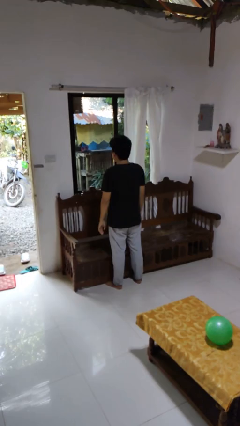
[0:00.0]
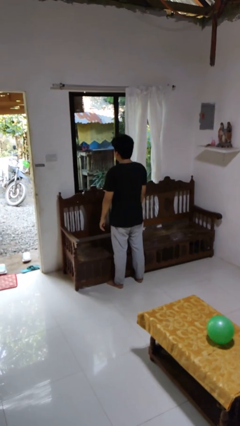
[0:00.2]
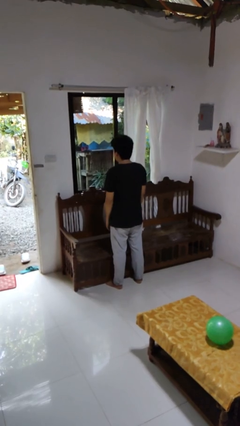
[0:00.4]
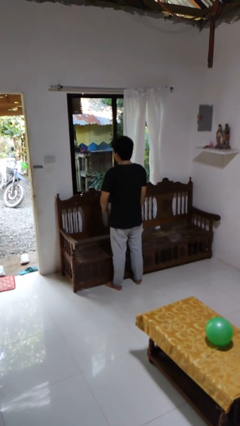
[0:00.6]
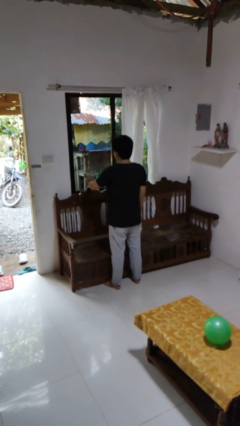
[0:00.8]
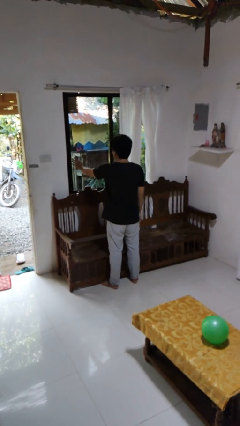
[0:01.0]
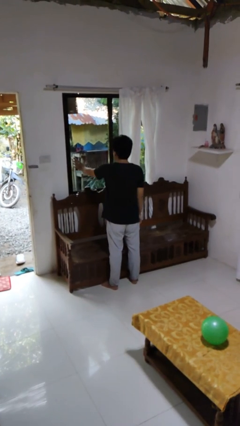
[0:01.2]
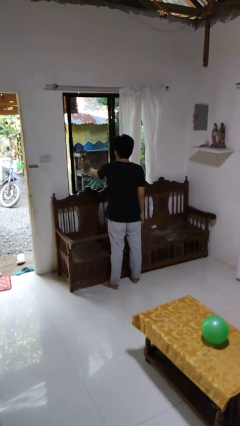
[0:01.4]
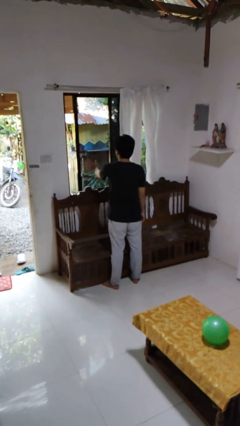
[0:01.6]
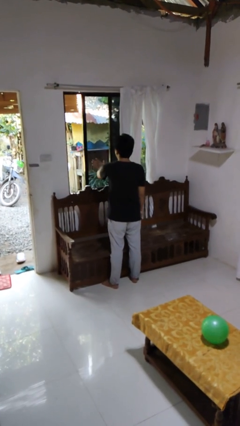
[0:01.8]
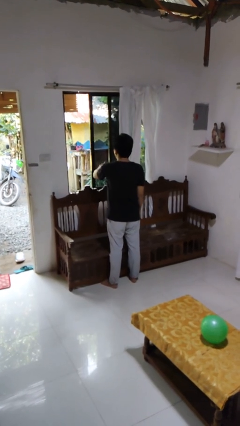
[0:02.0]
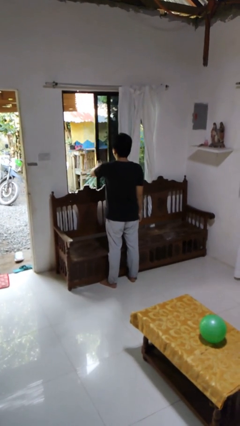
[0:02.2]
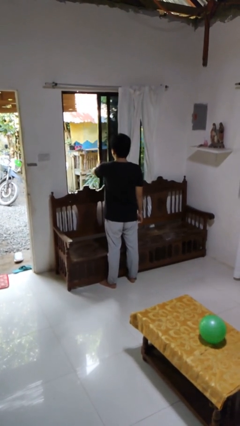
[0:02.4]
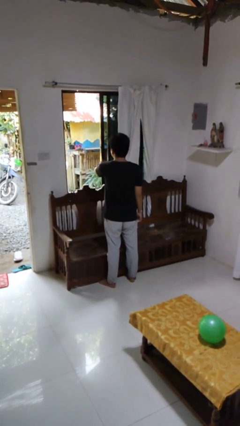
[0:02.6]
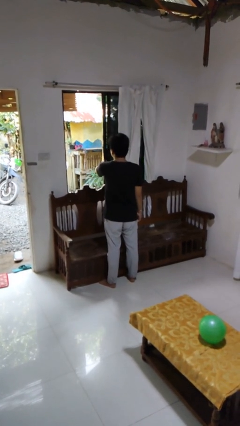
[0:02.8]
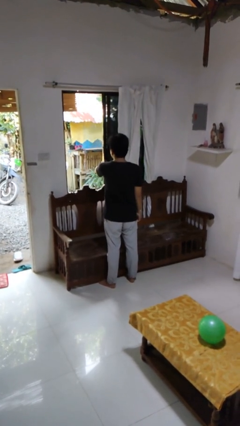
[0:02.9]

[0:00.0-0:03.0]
person opens home window

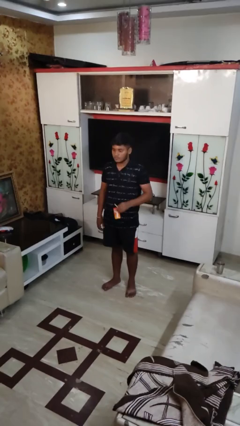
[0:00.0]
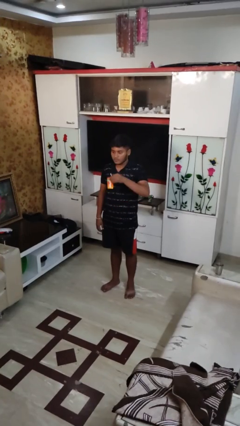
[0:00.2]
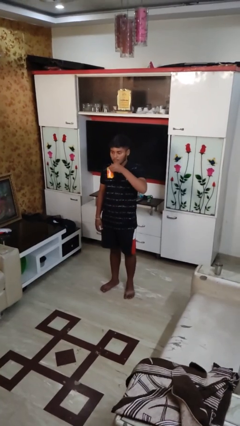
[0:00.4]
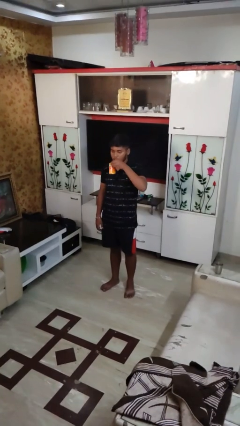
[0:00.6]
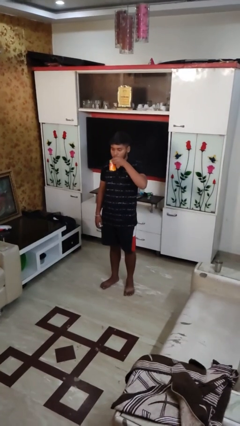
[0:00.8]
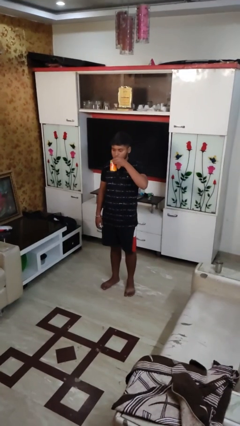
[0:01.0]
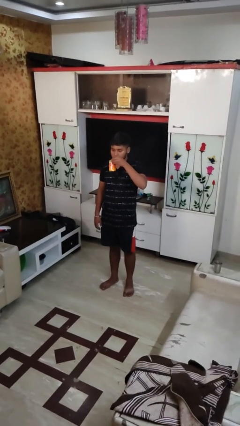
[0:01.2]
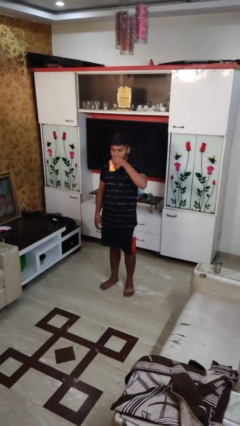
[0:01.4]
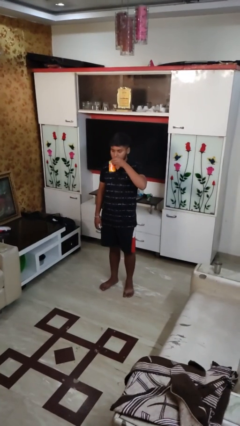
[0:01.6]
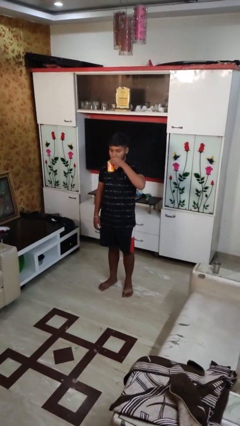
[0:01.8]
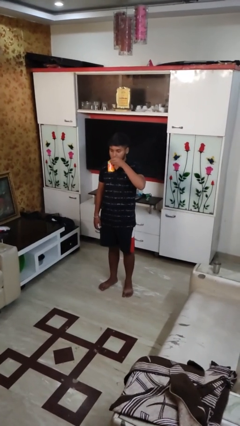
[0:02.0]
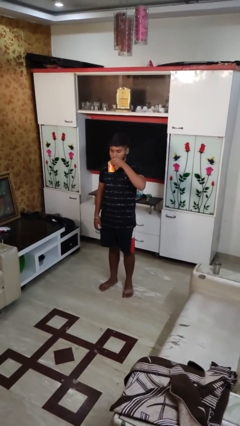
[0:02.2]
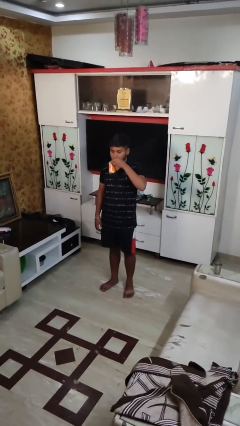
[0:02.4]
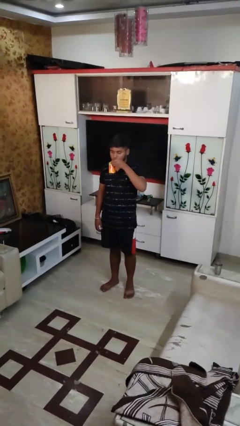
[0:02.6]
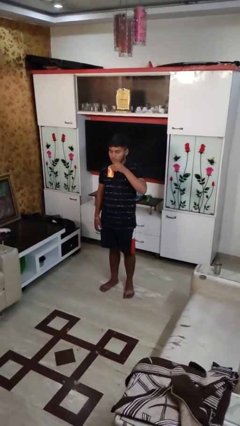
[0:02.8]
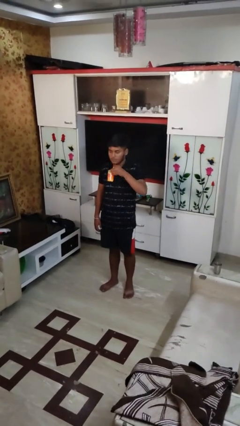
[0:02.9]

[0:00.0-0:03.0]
person drinks from straw

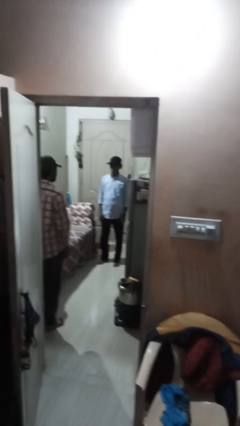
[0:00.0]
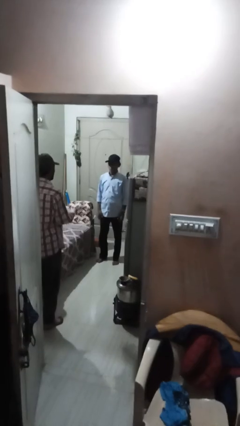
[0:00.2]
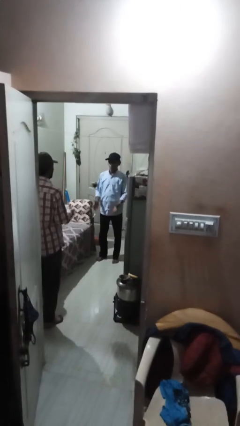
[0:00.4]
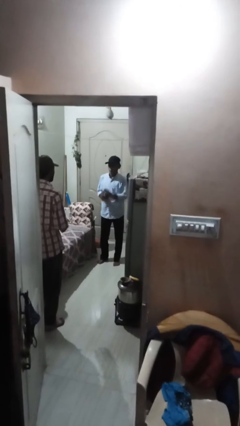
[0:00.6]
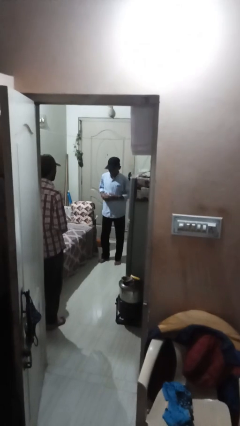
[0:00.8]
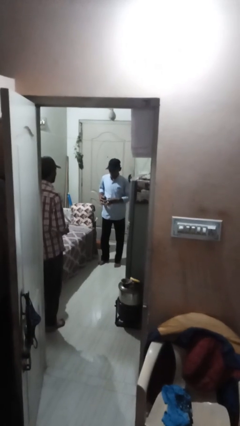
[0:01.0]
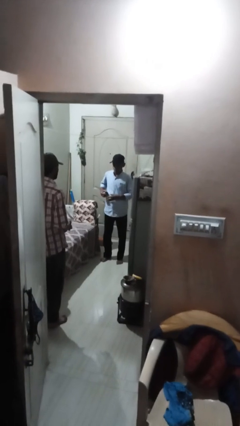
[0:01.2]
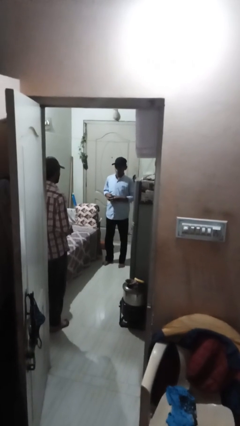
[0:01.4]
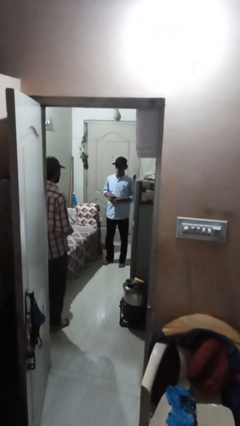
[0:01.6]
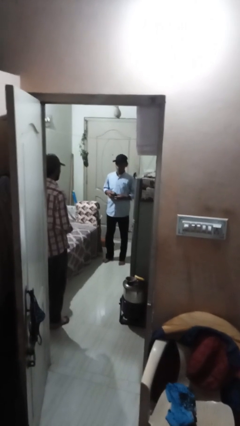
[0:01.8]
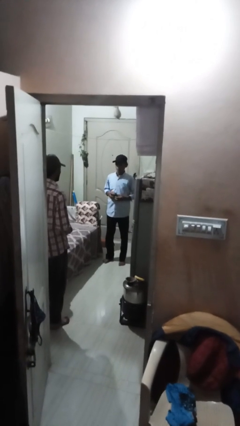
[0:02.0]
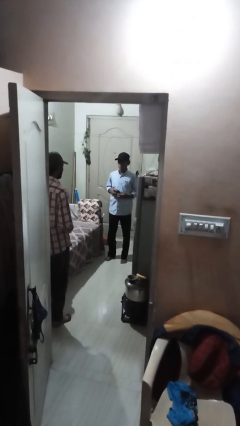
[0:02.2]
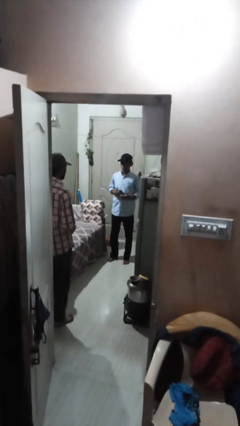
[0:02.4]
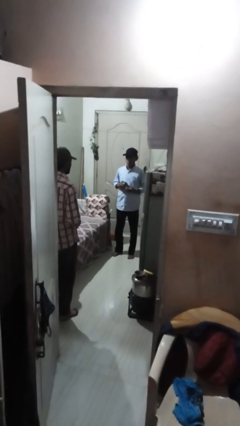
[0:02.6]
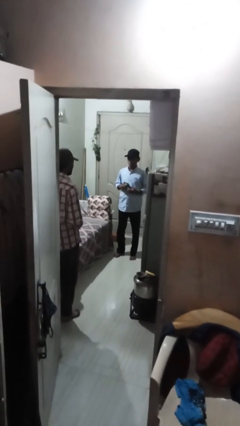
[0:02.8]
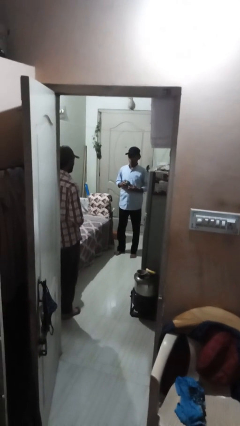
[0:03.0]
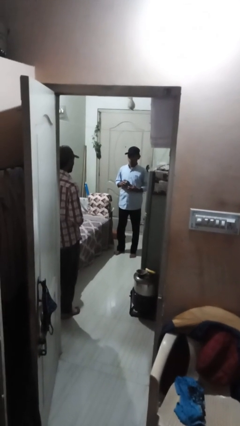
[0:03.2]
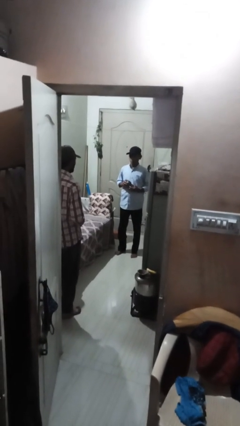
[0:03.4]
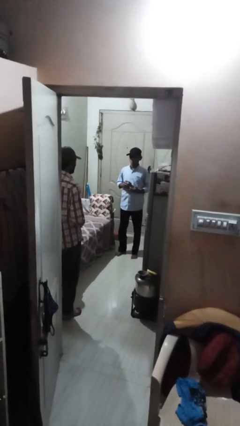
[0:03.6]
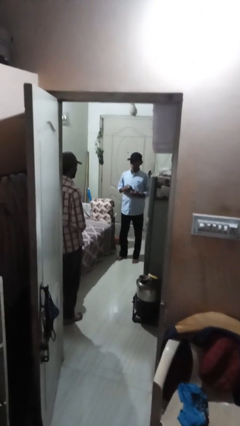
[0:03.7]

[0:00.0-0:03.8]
person catches object from person

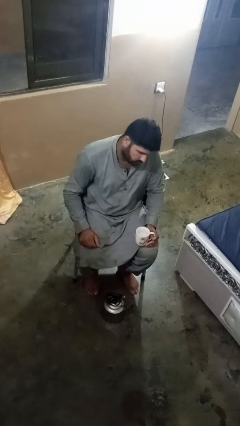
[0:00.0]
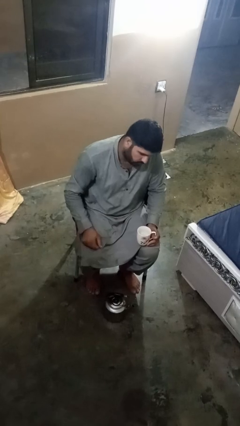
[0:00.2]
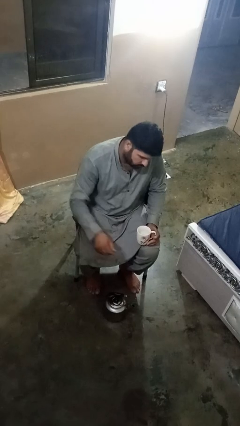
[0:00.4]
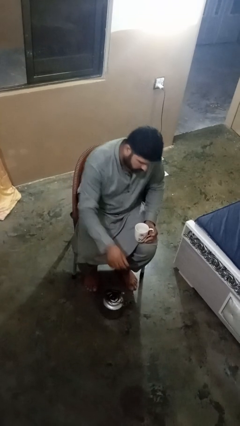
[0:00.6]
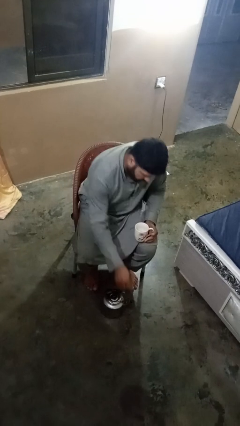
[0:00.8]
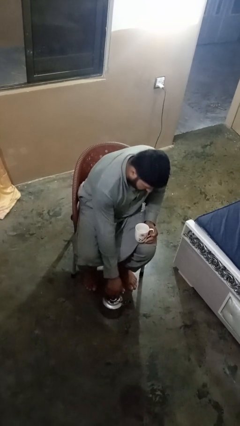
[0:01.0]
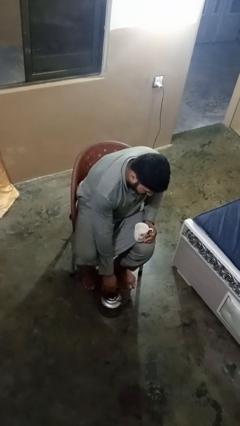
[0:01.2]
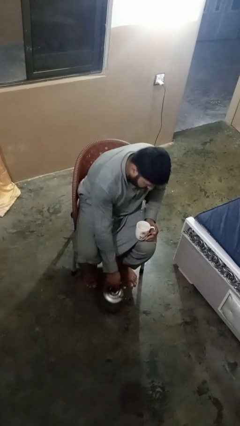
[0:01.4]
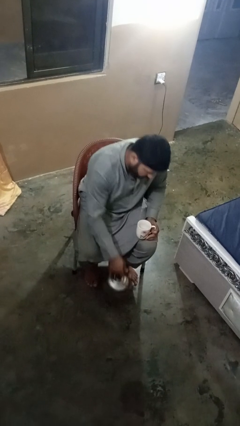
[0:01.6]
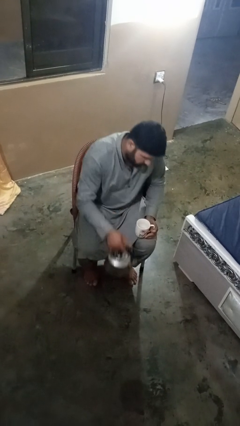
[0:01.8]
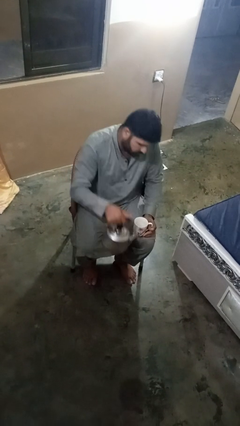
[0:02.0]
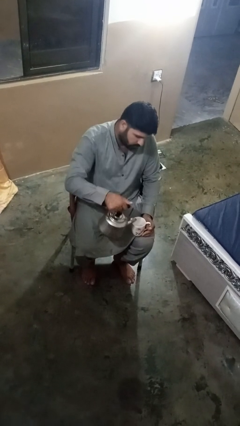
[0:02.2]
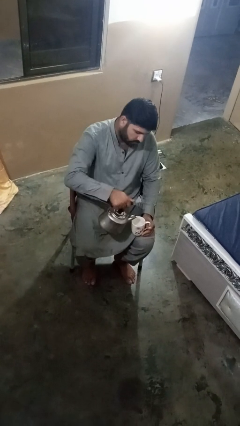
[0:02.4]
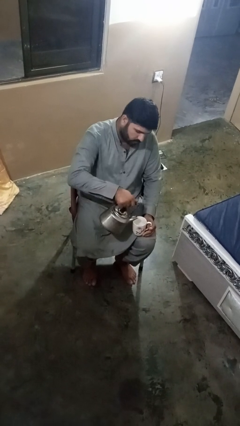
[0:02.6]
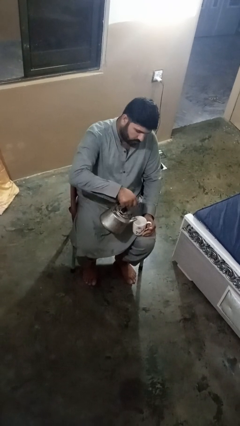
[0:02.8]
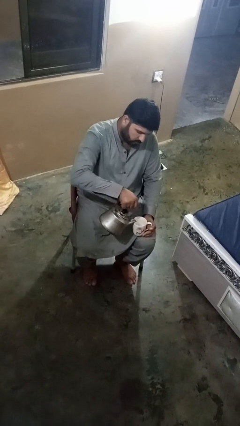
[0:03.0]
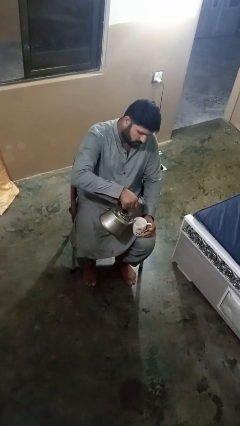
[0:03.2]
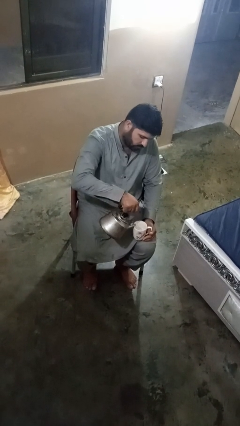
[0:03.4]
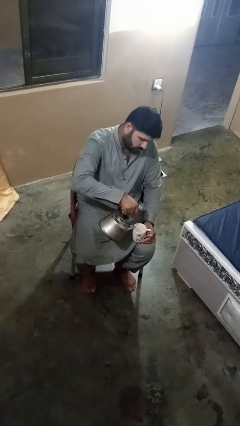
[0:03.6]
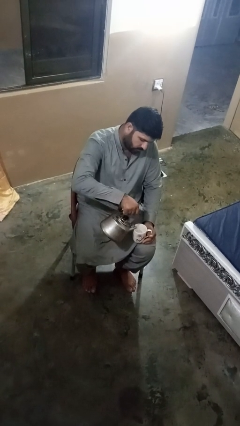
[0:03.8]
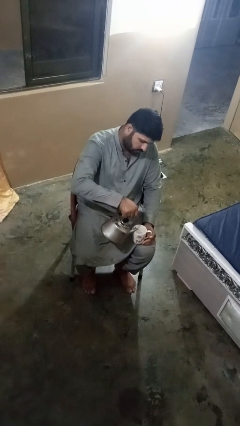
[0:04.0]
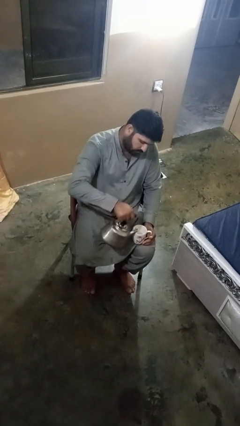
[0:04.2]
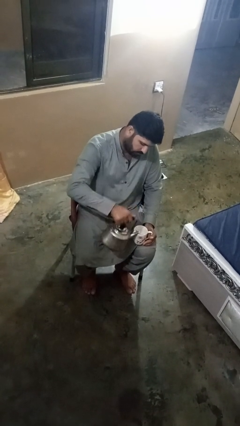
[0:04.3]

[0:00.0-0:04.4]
person pours coffee into mug

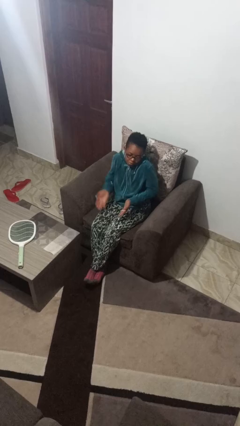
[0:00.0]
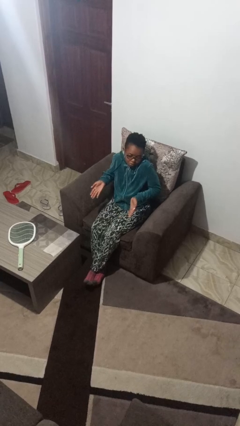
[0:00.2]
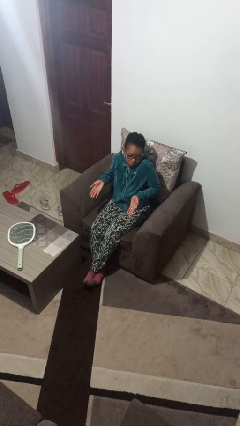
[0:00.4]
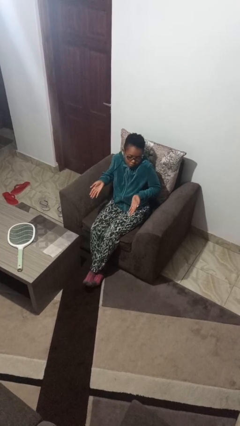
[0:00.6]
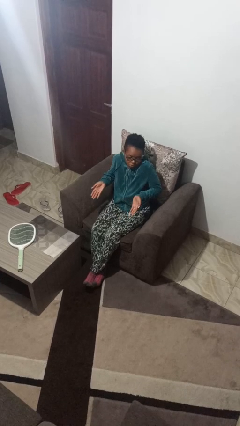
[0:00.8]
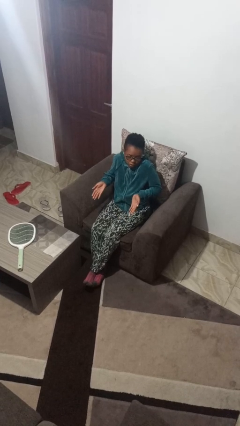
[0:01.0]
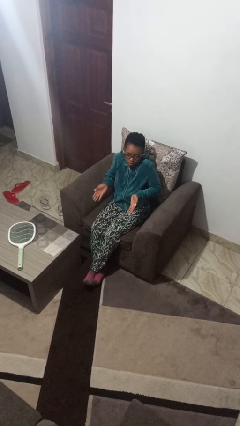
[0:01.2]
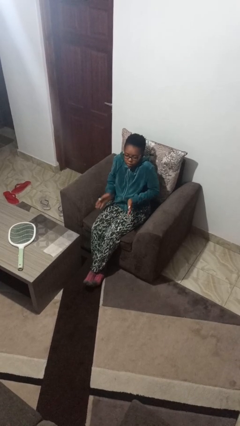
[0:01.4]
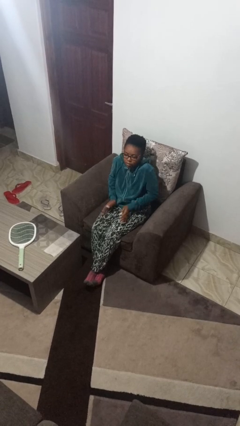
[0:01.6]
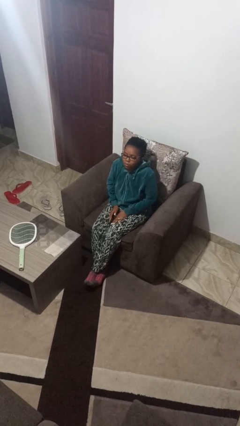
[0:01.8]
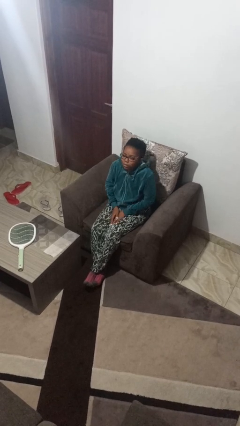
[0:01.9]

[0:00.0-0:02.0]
person shrugs

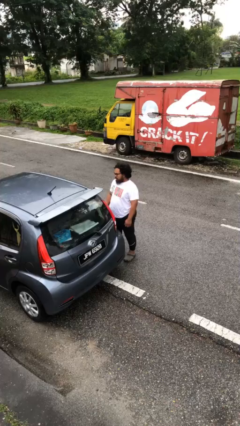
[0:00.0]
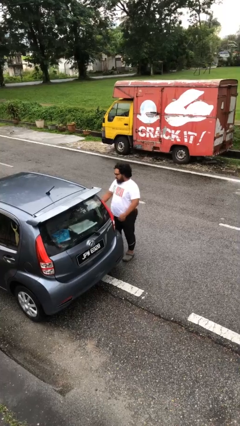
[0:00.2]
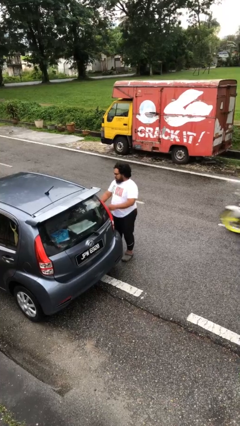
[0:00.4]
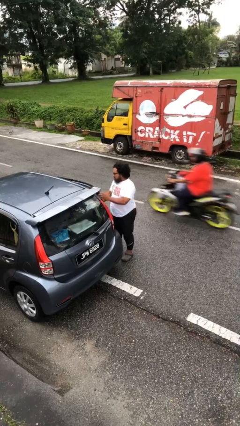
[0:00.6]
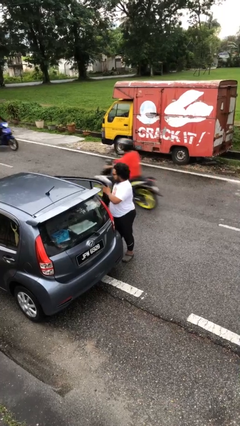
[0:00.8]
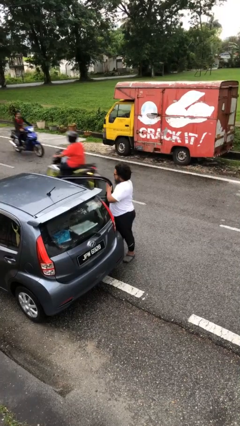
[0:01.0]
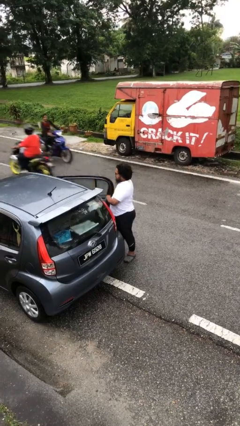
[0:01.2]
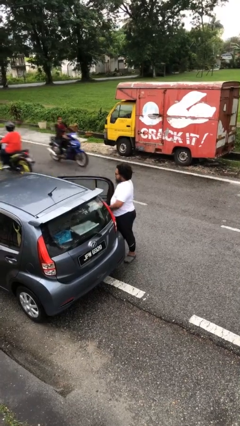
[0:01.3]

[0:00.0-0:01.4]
person opens car door
